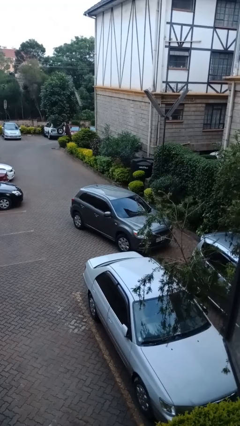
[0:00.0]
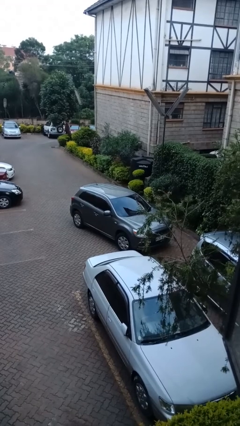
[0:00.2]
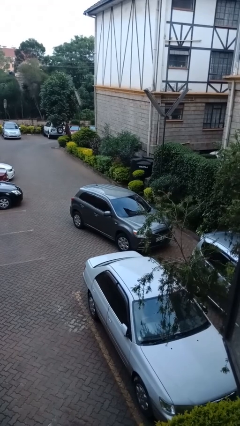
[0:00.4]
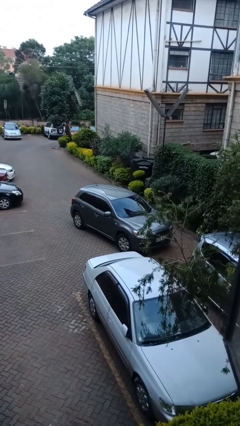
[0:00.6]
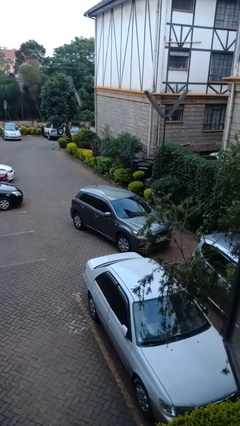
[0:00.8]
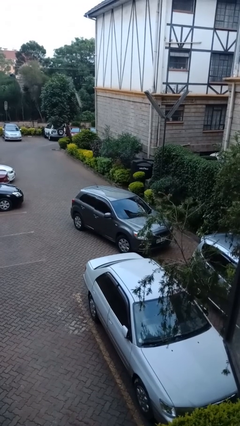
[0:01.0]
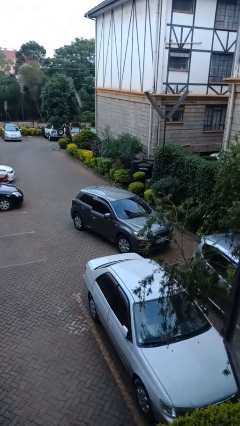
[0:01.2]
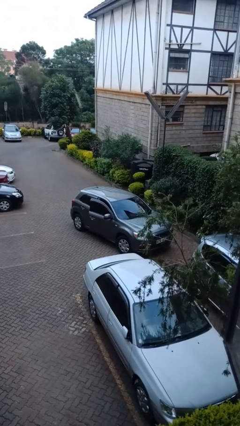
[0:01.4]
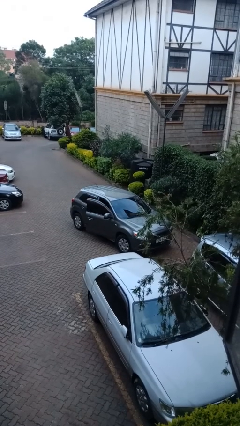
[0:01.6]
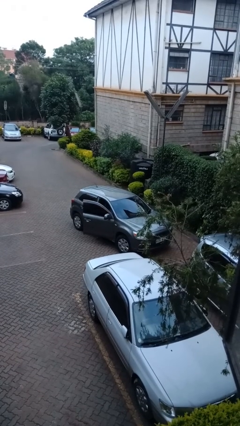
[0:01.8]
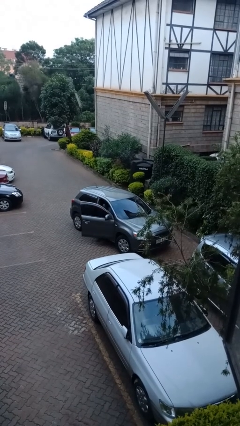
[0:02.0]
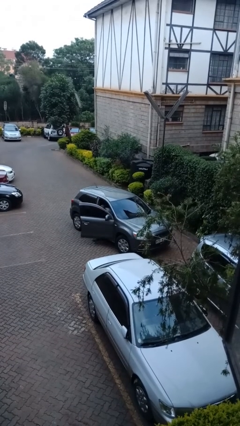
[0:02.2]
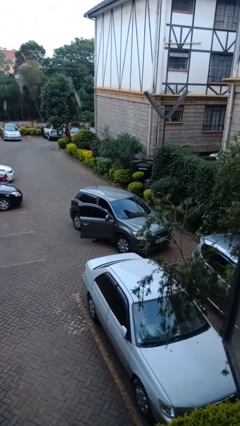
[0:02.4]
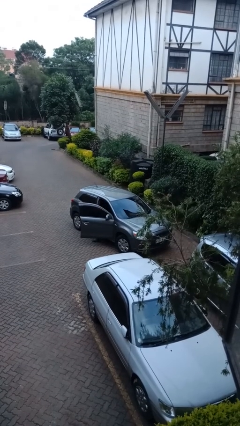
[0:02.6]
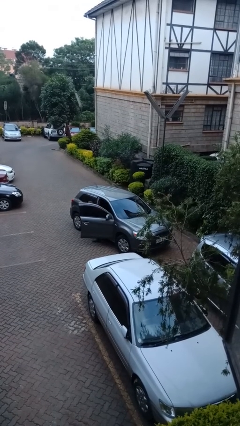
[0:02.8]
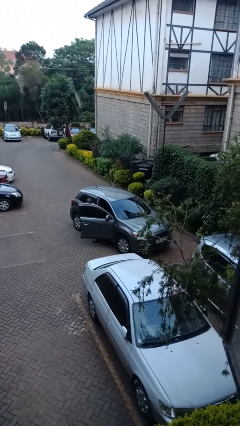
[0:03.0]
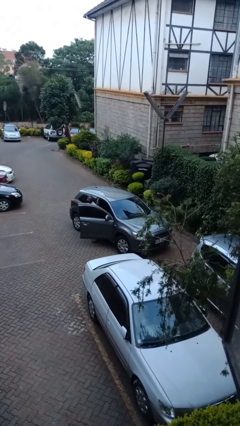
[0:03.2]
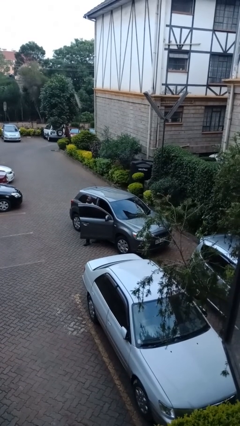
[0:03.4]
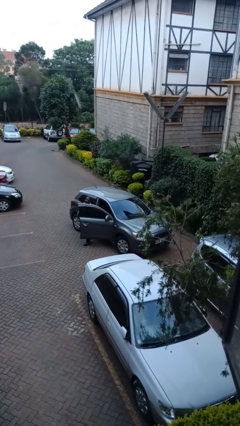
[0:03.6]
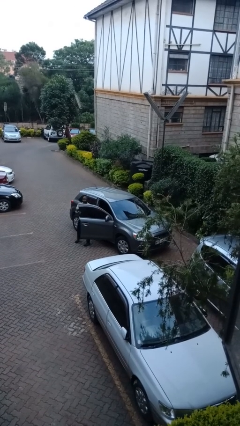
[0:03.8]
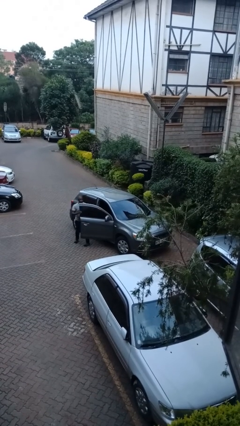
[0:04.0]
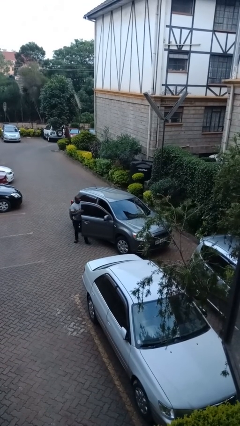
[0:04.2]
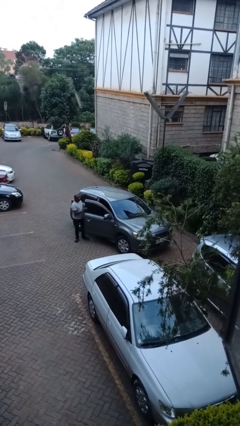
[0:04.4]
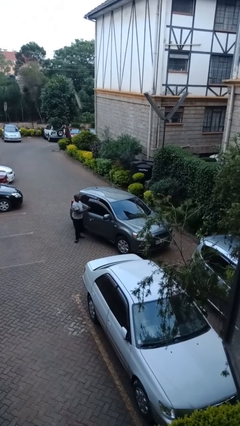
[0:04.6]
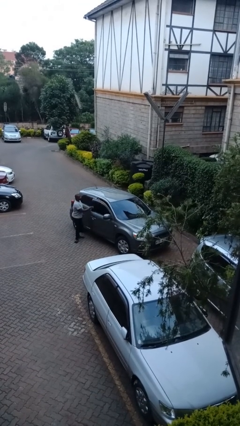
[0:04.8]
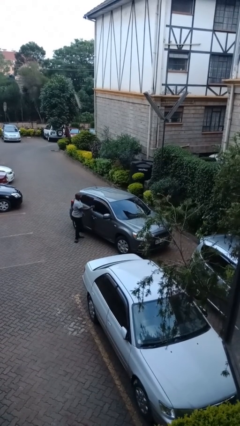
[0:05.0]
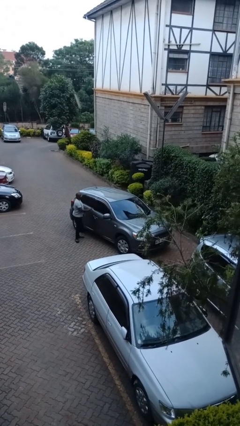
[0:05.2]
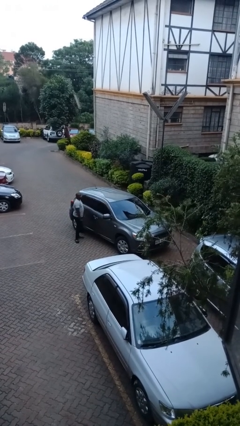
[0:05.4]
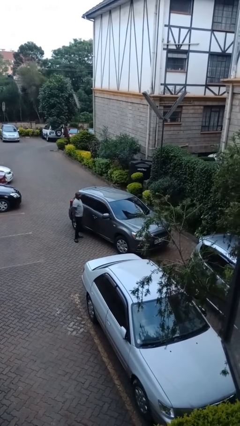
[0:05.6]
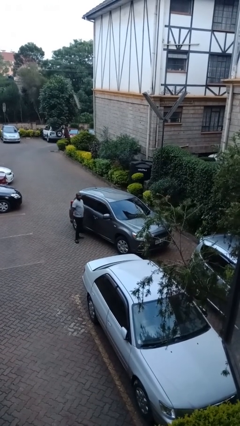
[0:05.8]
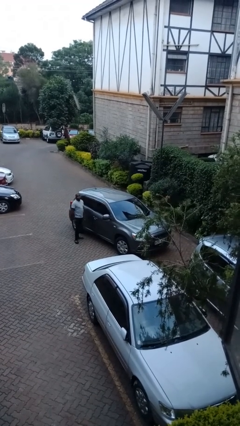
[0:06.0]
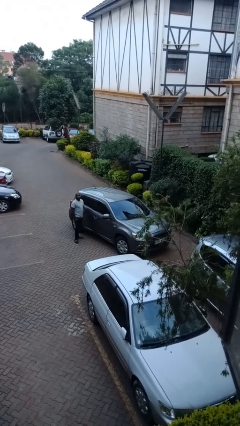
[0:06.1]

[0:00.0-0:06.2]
car drops off person

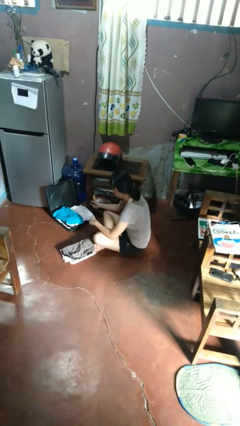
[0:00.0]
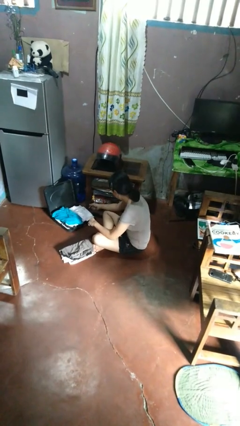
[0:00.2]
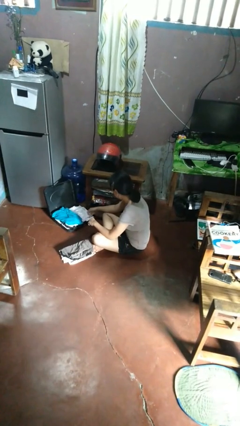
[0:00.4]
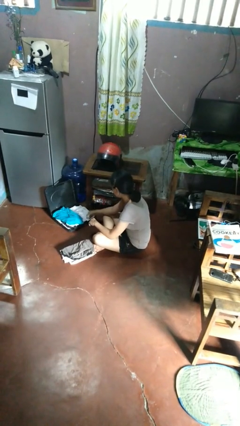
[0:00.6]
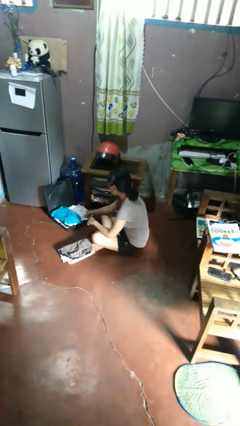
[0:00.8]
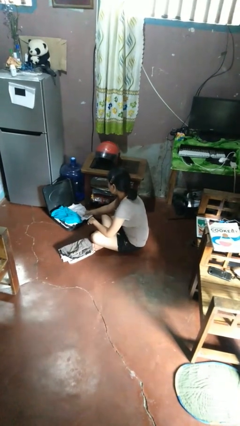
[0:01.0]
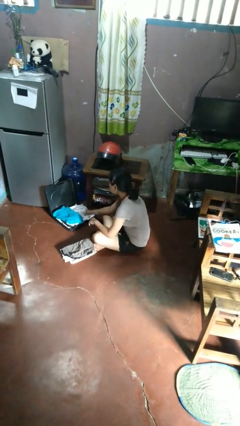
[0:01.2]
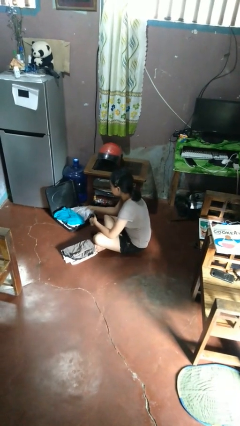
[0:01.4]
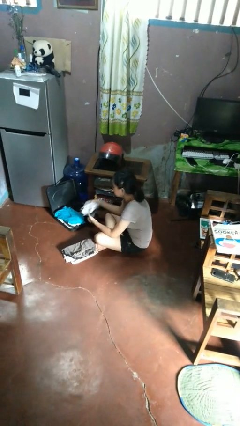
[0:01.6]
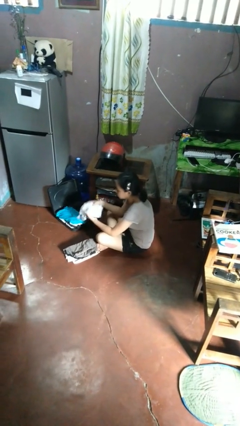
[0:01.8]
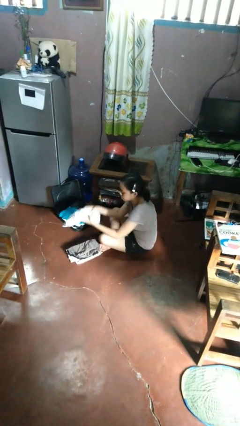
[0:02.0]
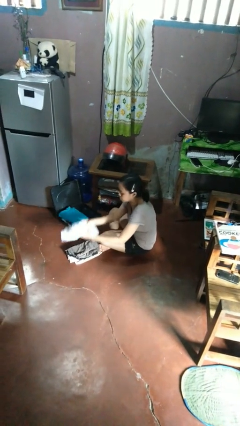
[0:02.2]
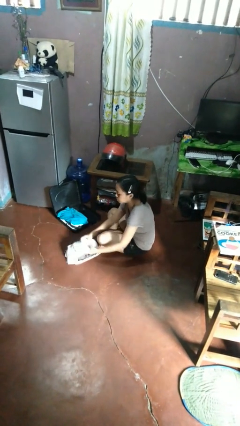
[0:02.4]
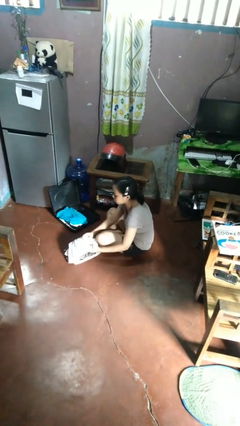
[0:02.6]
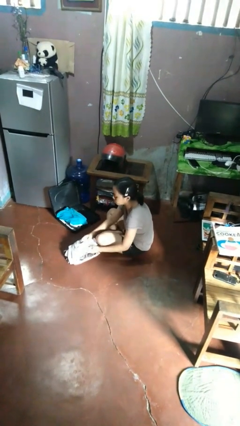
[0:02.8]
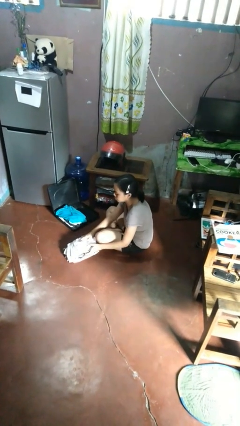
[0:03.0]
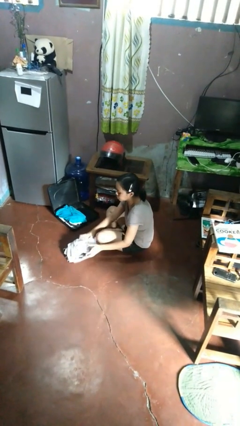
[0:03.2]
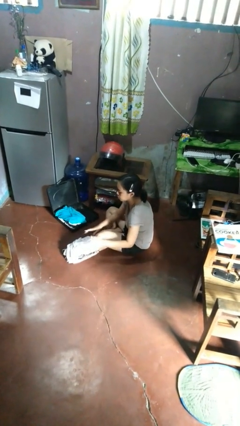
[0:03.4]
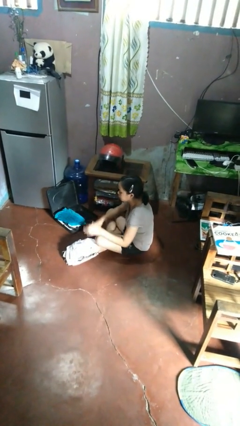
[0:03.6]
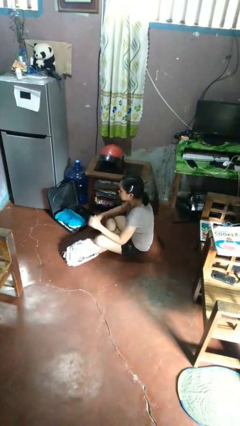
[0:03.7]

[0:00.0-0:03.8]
person unloads clothes from suitcase

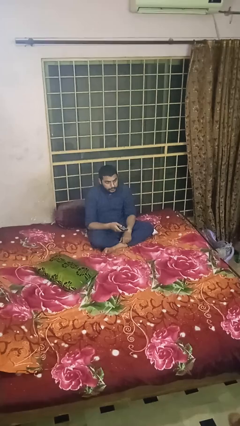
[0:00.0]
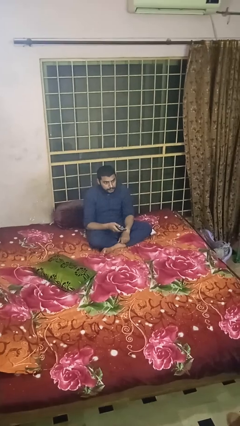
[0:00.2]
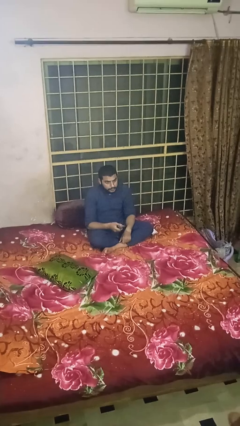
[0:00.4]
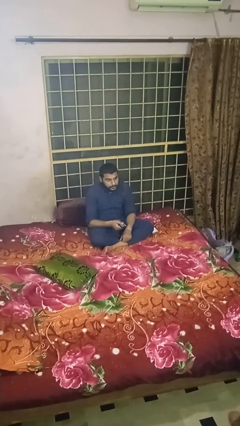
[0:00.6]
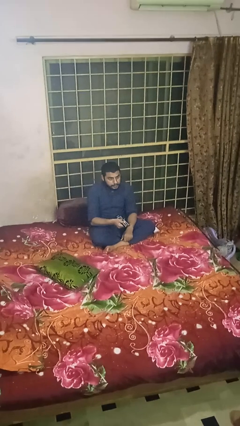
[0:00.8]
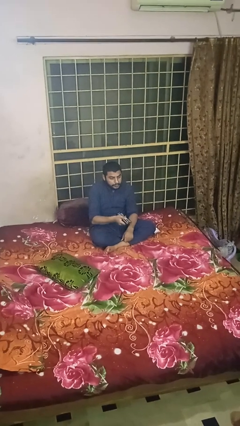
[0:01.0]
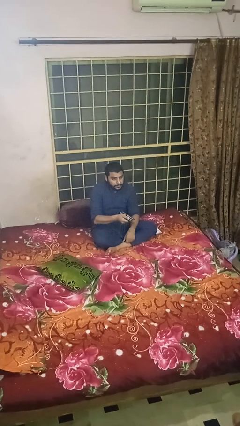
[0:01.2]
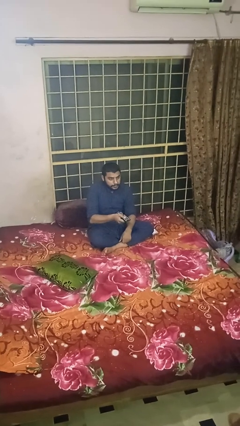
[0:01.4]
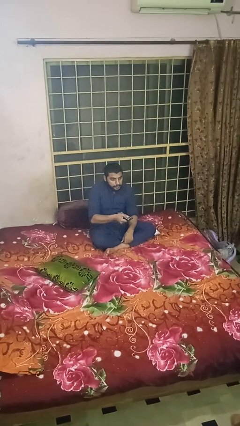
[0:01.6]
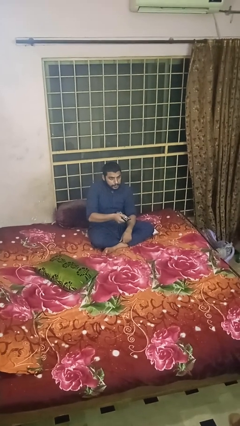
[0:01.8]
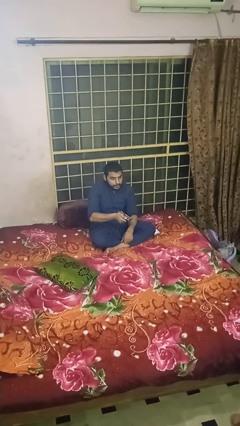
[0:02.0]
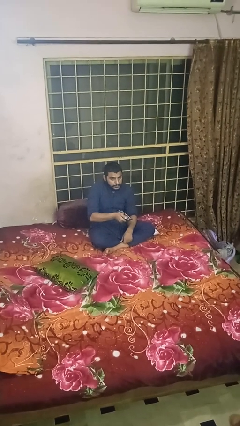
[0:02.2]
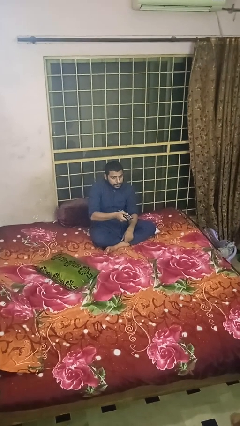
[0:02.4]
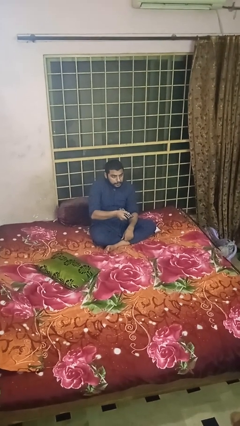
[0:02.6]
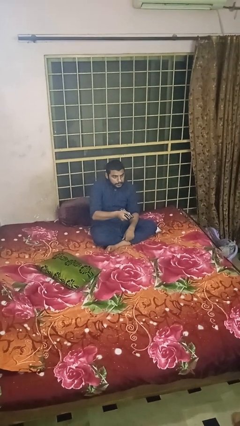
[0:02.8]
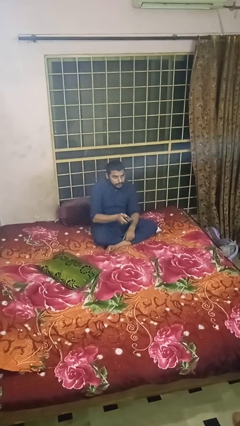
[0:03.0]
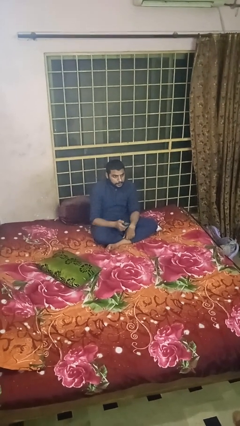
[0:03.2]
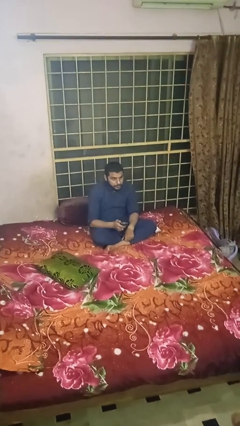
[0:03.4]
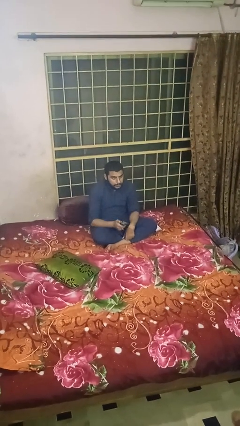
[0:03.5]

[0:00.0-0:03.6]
person uses television remote

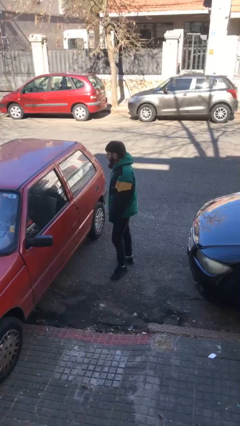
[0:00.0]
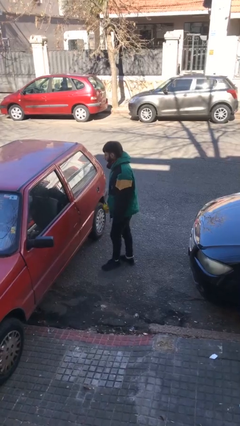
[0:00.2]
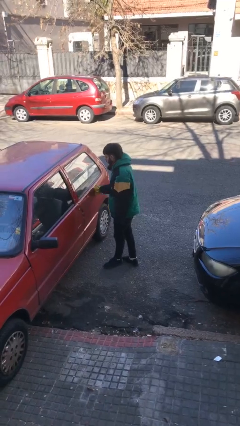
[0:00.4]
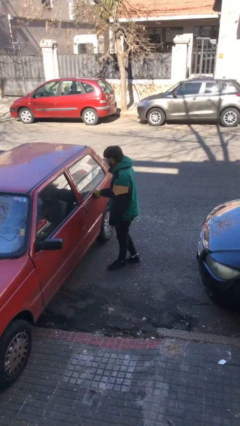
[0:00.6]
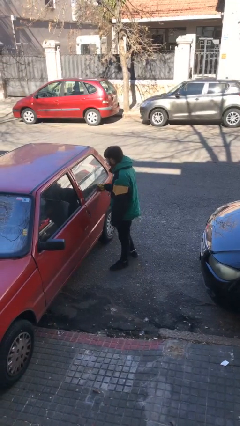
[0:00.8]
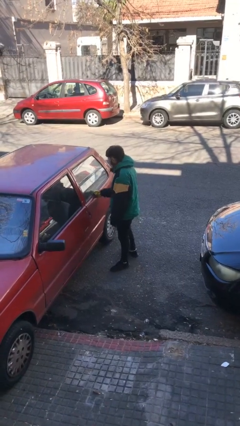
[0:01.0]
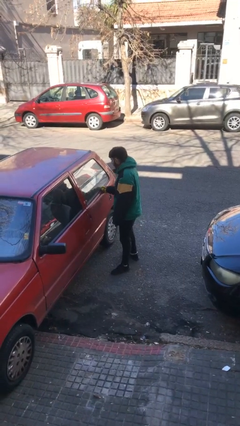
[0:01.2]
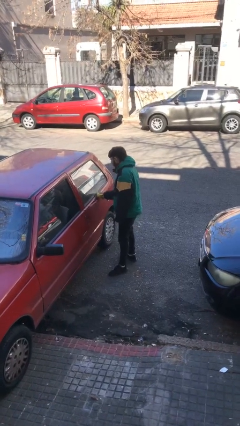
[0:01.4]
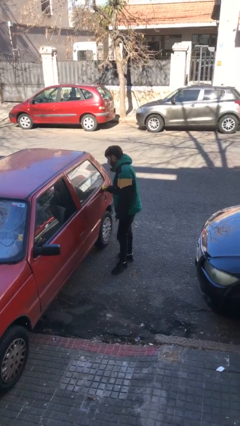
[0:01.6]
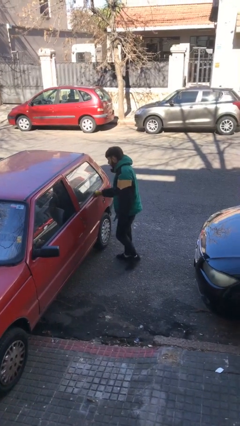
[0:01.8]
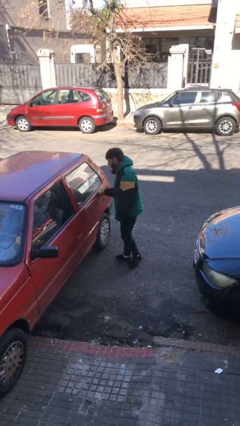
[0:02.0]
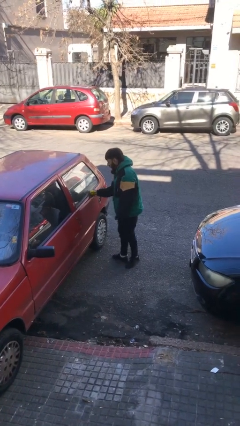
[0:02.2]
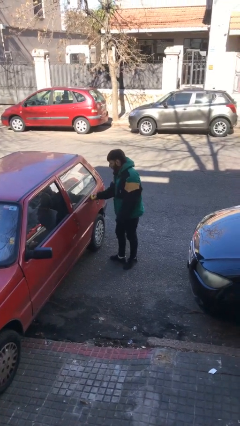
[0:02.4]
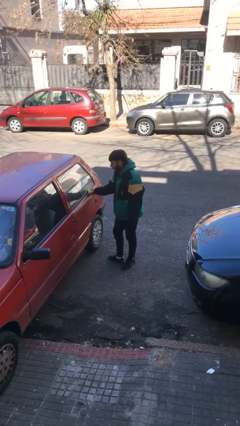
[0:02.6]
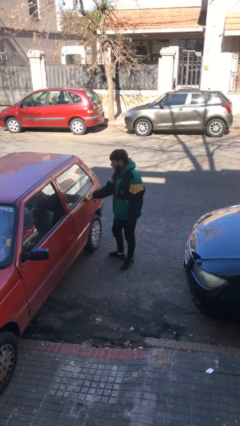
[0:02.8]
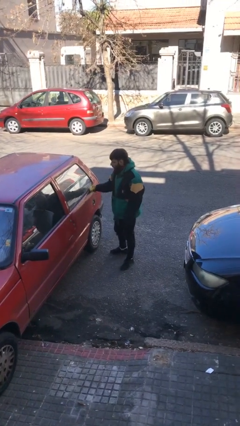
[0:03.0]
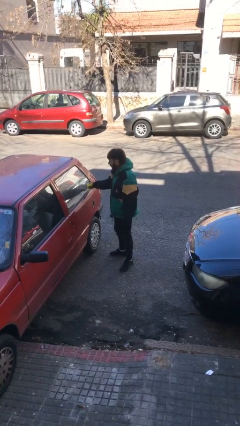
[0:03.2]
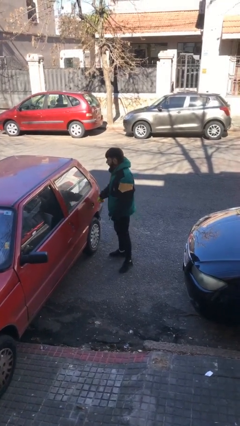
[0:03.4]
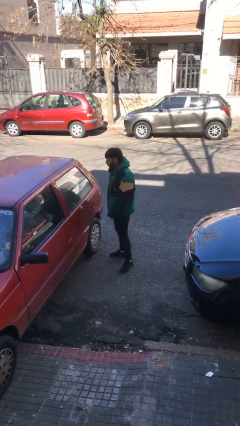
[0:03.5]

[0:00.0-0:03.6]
person polishes car with rag

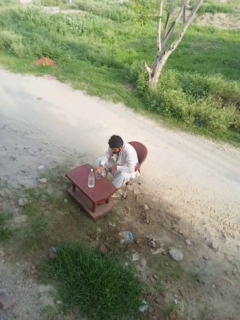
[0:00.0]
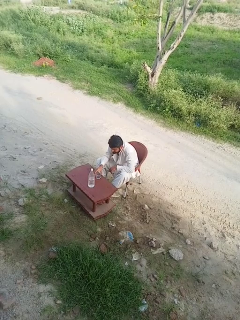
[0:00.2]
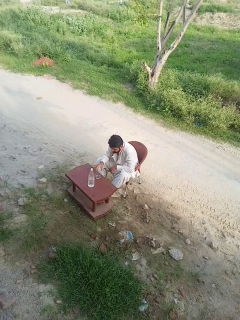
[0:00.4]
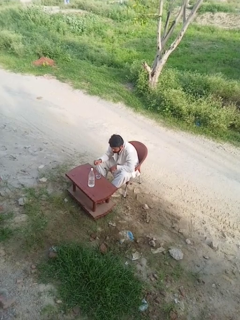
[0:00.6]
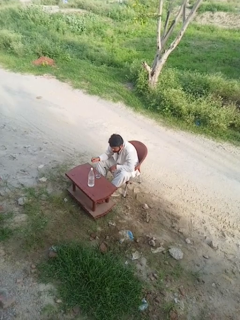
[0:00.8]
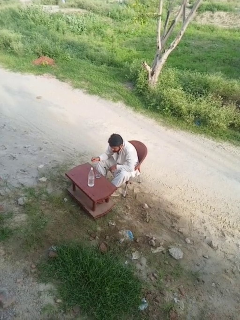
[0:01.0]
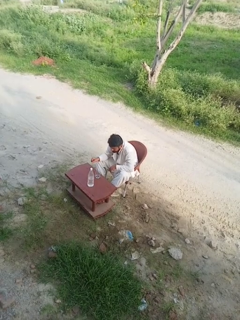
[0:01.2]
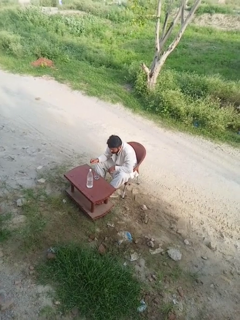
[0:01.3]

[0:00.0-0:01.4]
person puts down object on table
